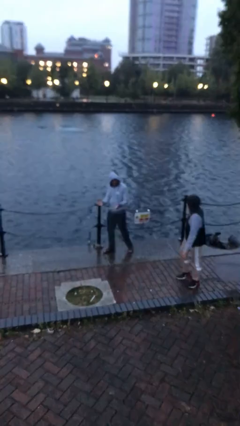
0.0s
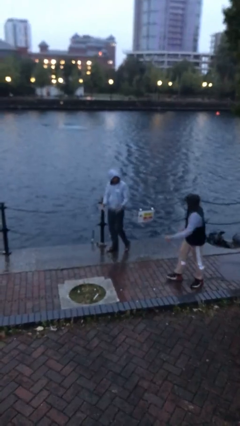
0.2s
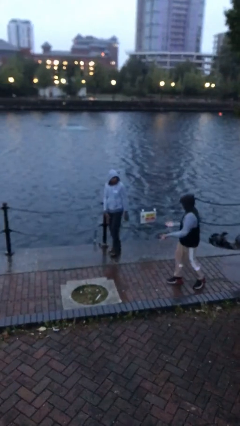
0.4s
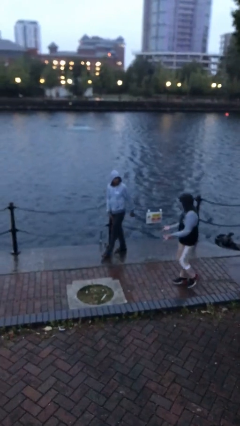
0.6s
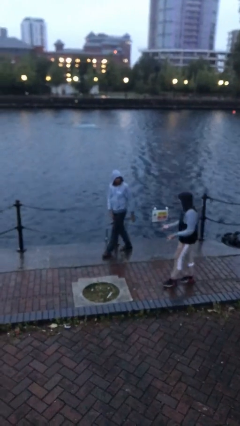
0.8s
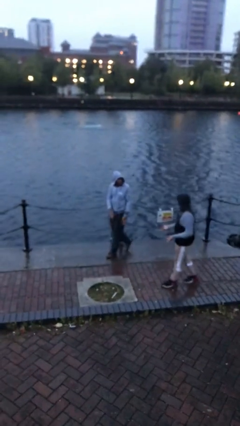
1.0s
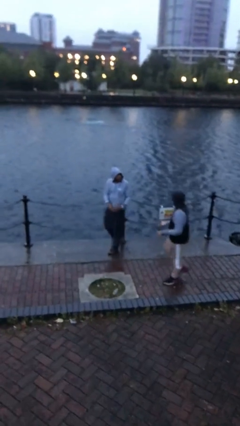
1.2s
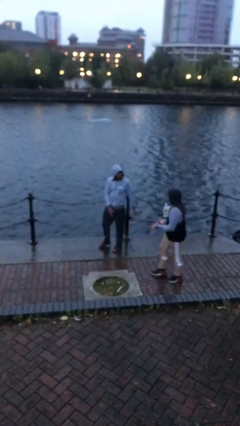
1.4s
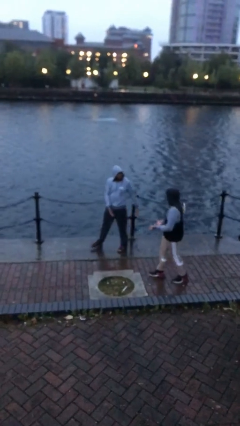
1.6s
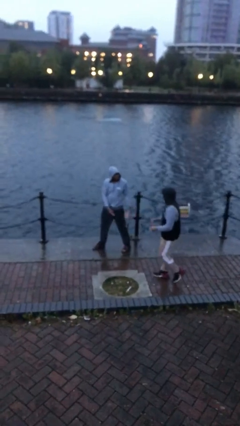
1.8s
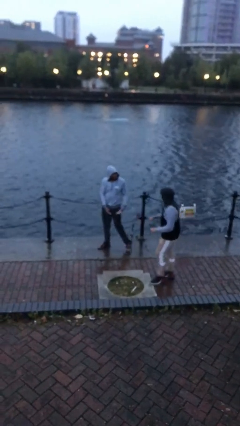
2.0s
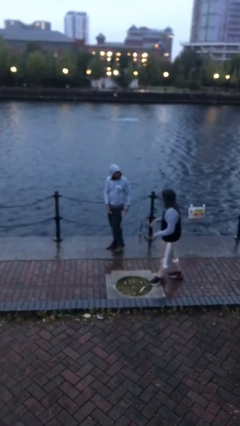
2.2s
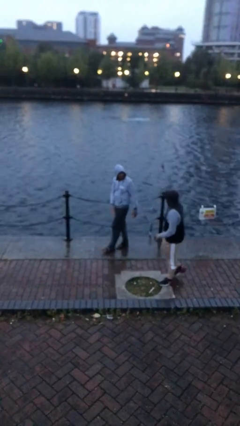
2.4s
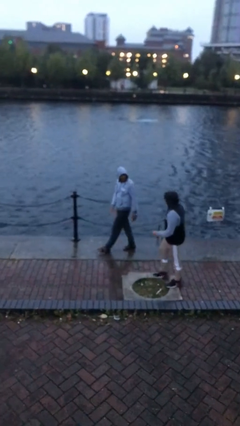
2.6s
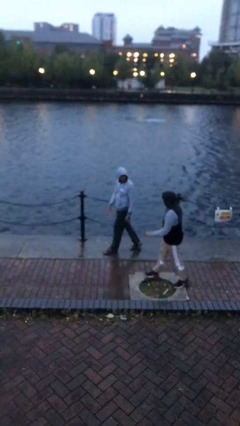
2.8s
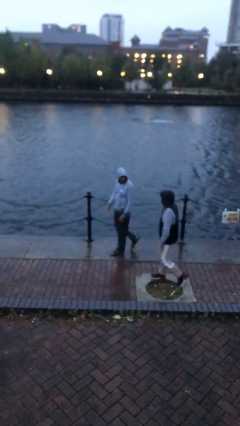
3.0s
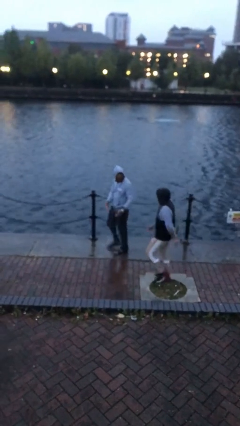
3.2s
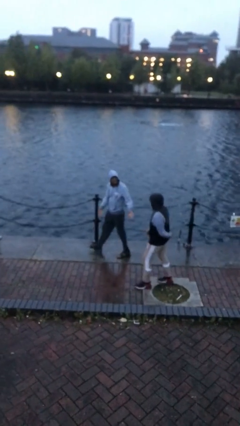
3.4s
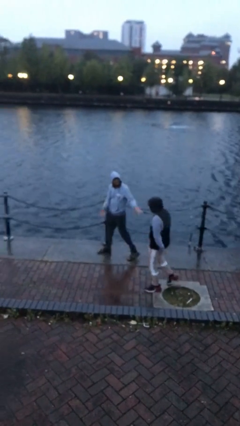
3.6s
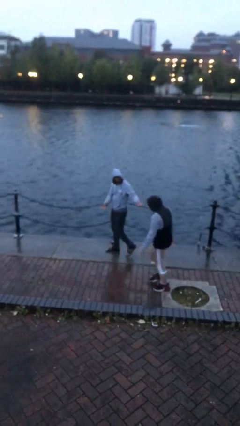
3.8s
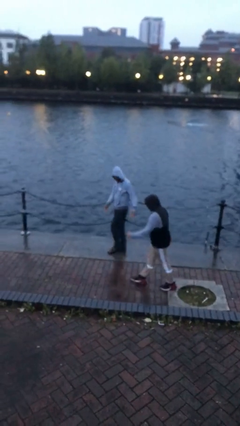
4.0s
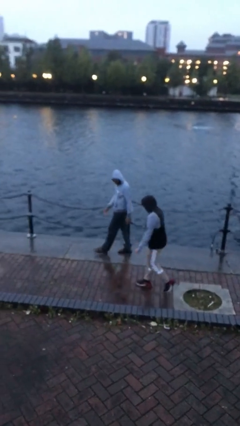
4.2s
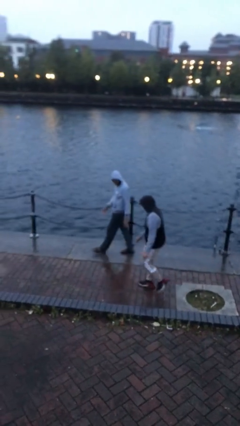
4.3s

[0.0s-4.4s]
person talks to person

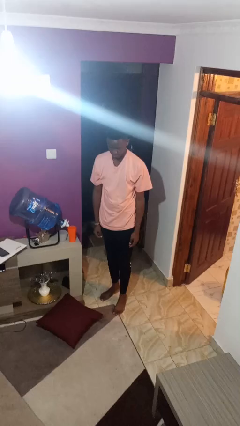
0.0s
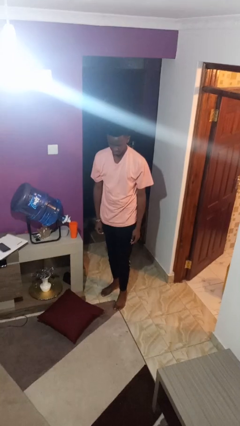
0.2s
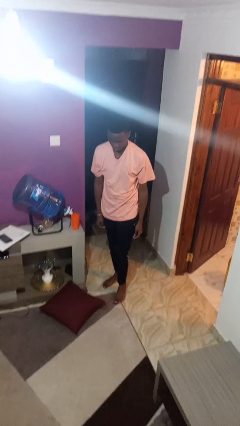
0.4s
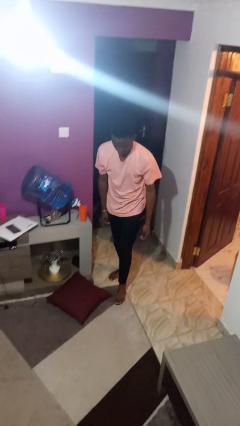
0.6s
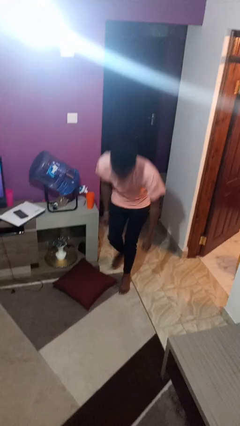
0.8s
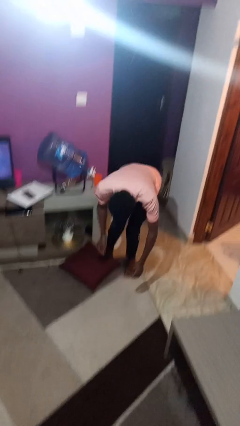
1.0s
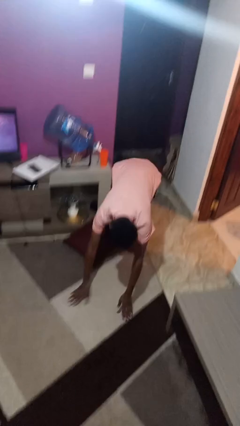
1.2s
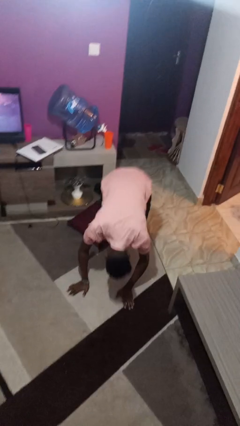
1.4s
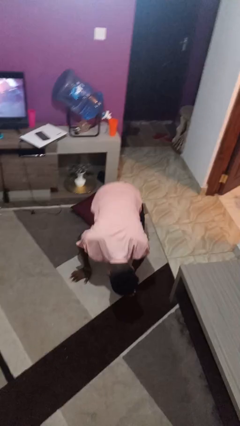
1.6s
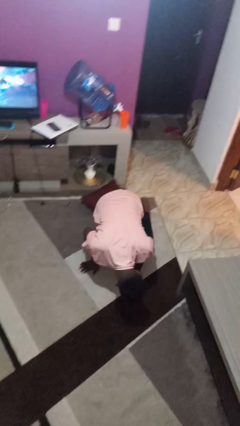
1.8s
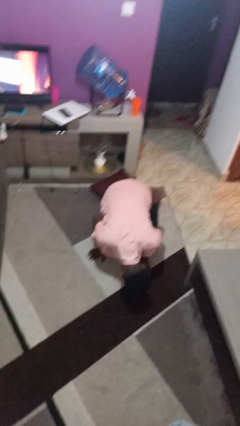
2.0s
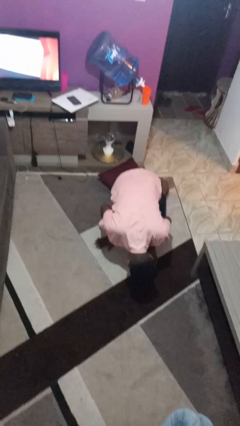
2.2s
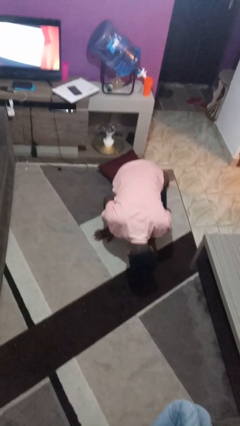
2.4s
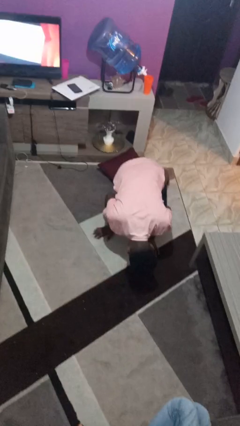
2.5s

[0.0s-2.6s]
person trips on object on floor

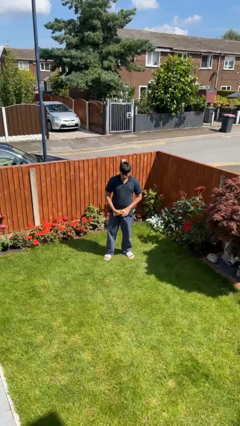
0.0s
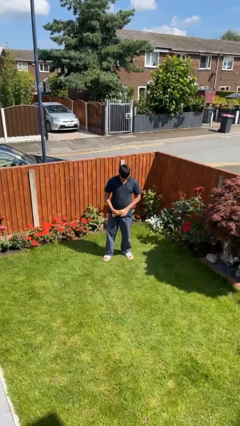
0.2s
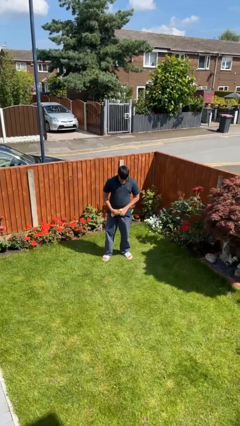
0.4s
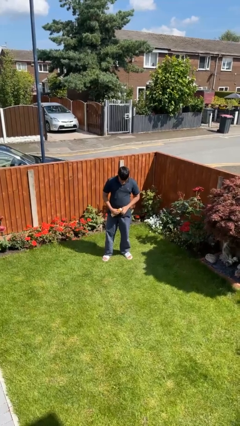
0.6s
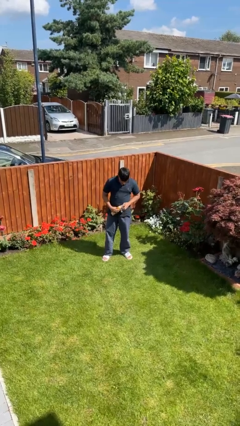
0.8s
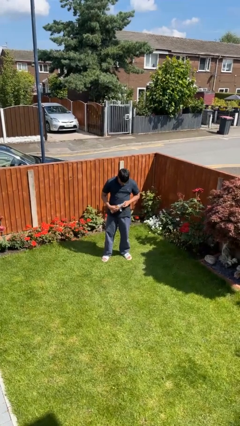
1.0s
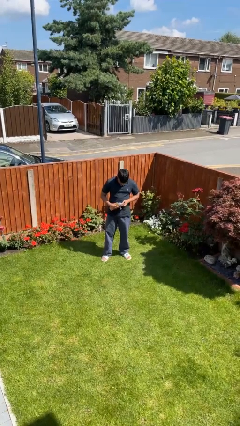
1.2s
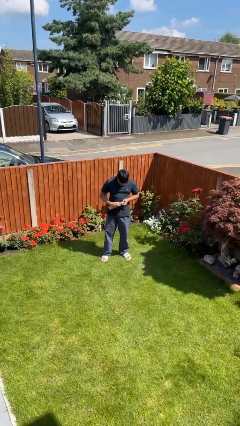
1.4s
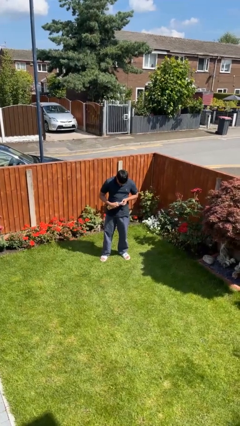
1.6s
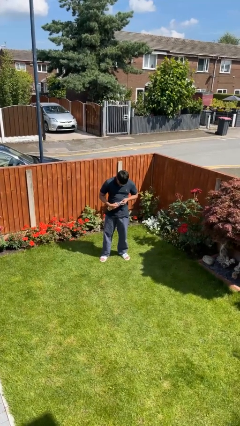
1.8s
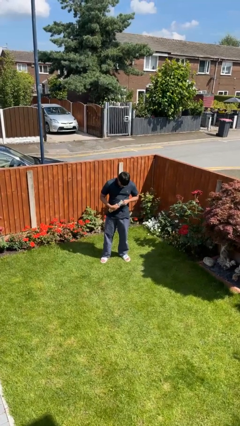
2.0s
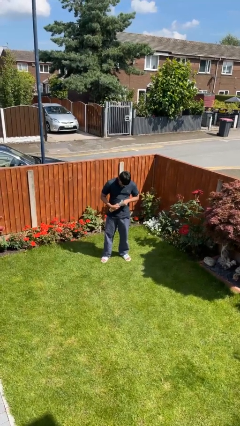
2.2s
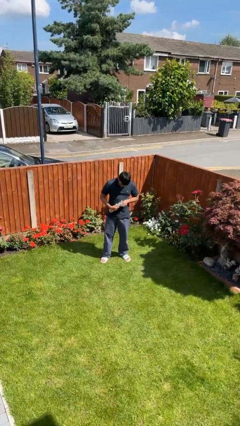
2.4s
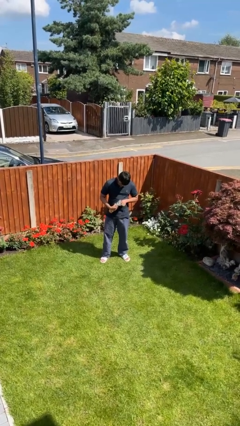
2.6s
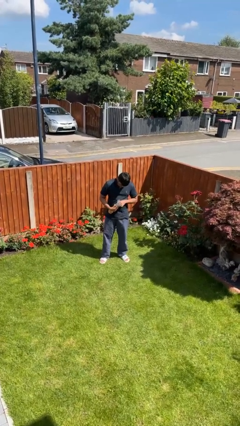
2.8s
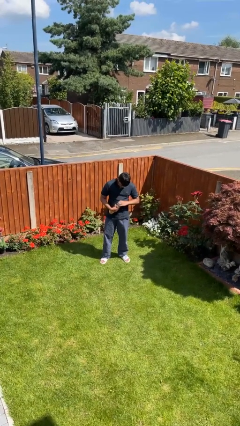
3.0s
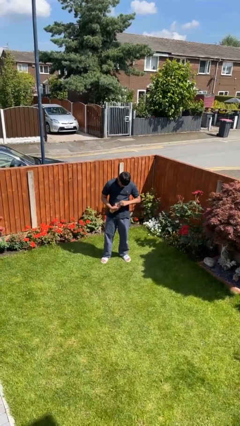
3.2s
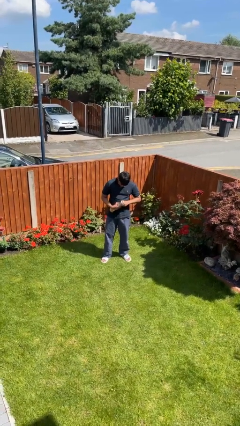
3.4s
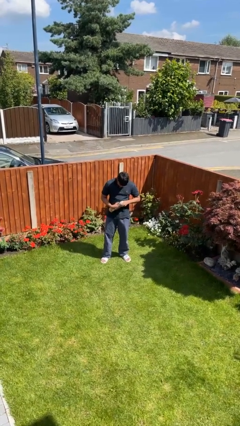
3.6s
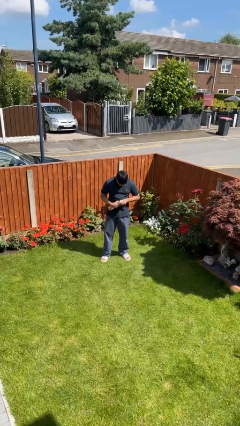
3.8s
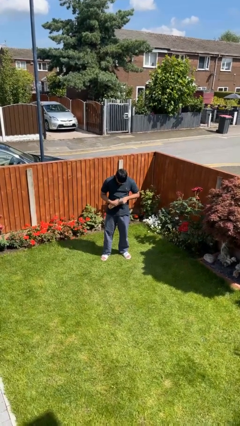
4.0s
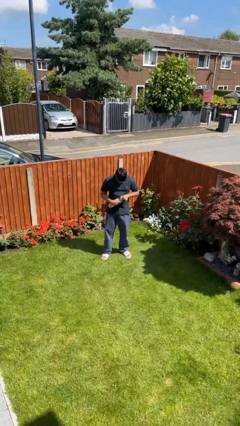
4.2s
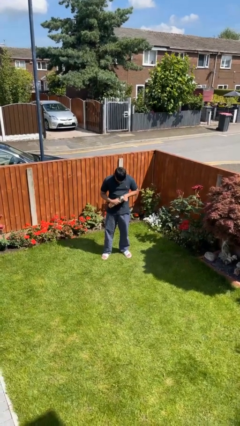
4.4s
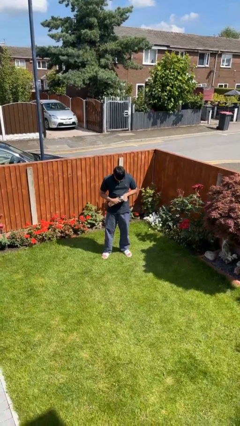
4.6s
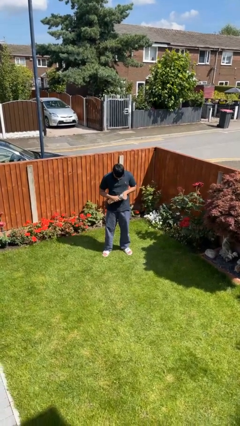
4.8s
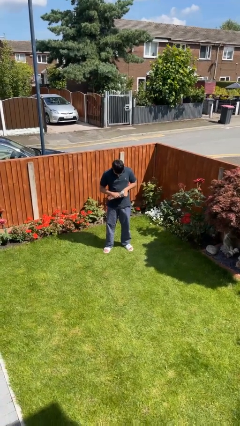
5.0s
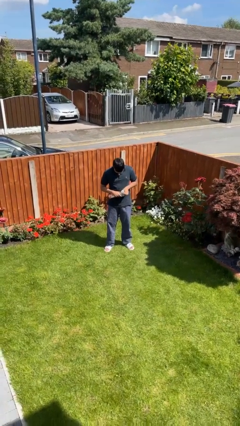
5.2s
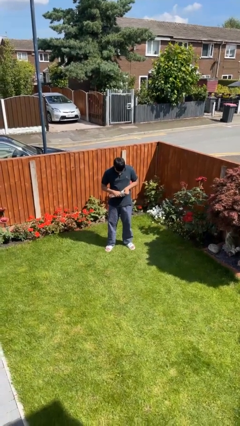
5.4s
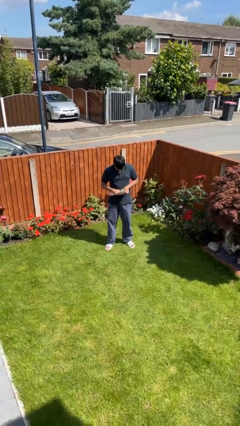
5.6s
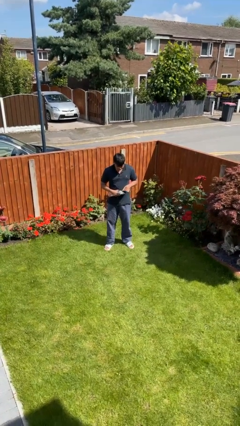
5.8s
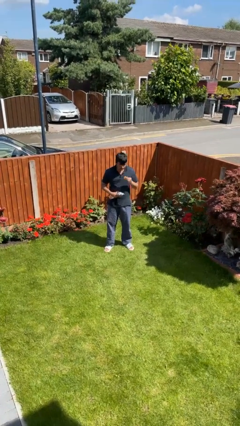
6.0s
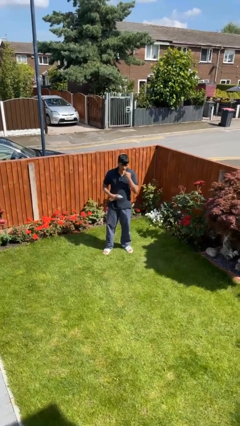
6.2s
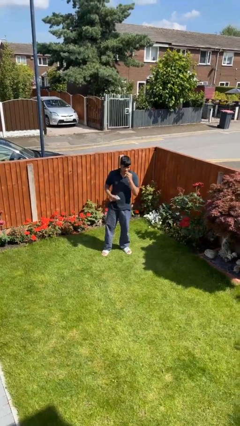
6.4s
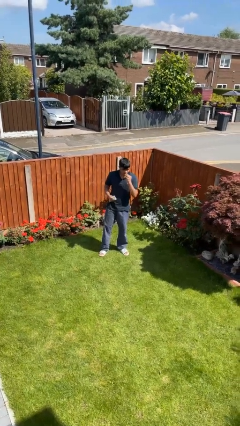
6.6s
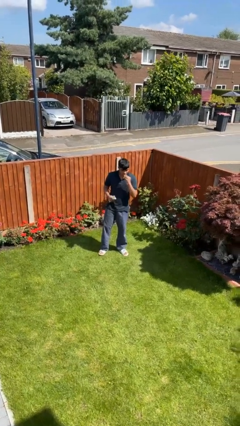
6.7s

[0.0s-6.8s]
person eats snack from bag

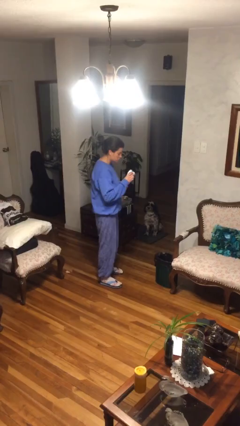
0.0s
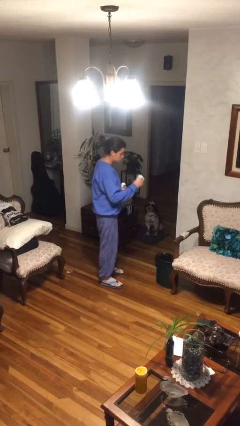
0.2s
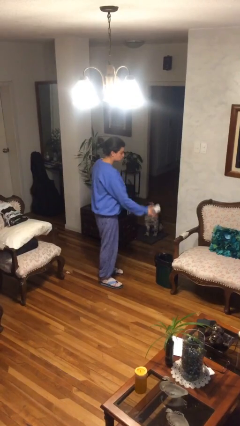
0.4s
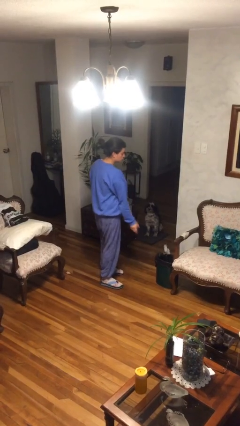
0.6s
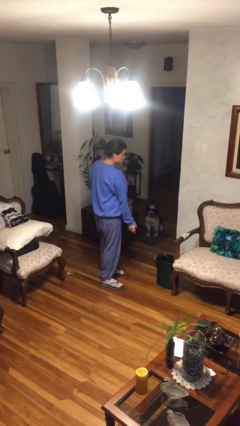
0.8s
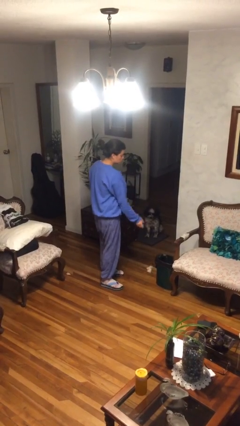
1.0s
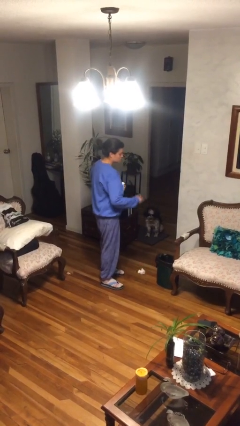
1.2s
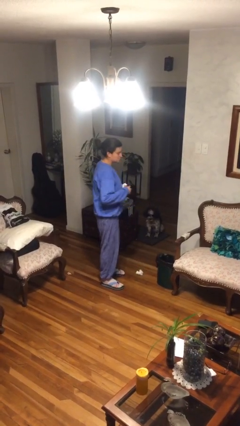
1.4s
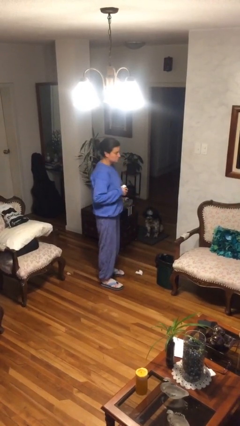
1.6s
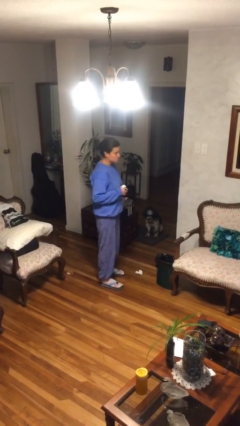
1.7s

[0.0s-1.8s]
person discards trash

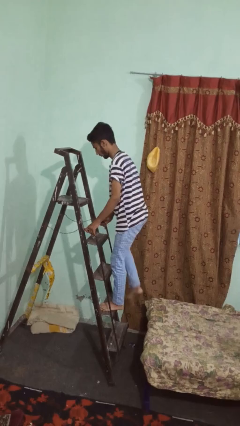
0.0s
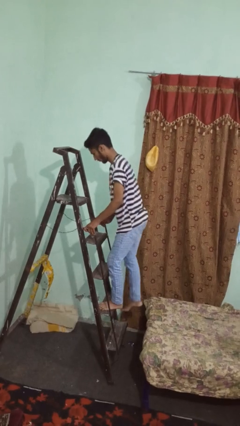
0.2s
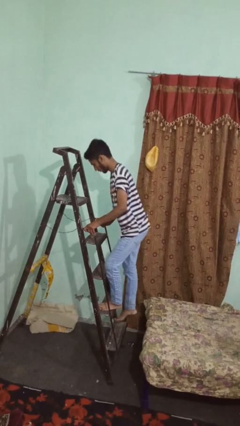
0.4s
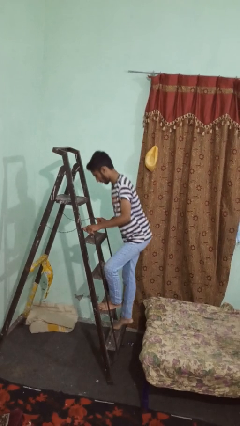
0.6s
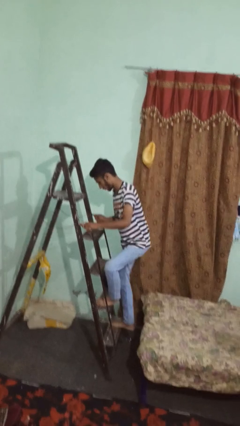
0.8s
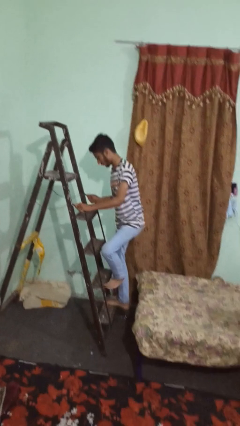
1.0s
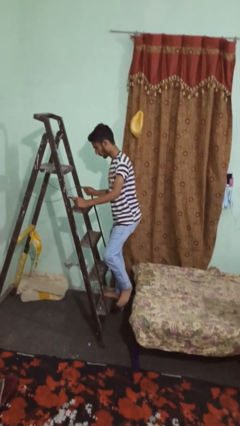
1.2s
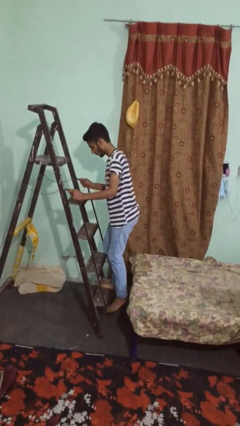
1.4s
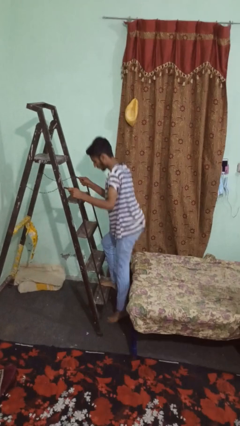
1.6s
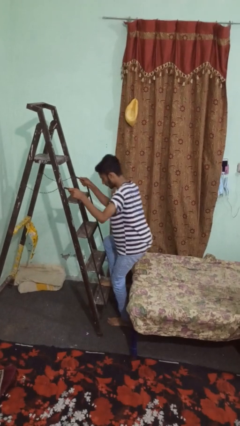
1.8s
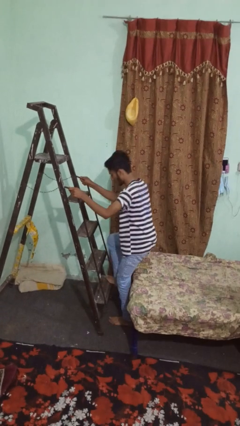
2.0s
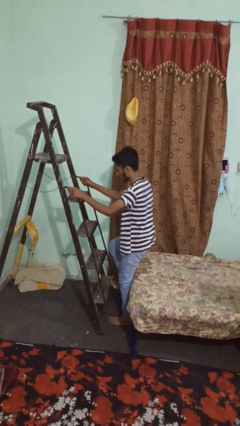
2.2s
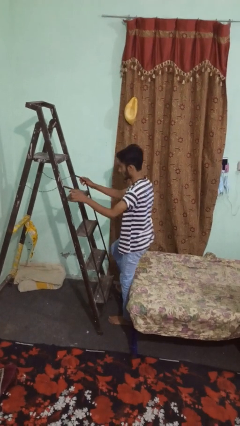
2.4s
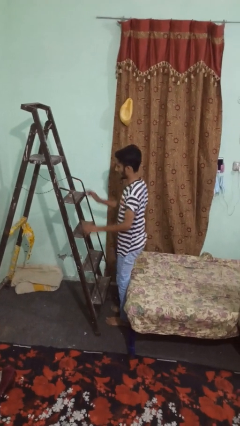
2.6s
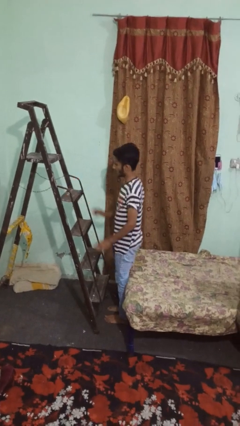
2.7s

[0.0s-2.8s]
person climbs down ladder
